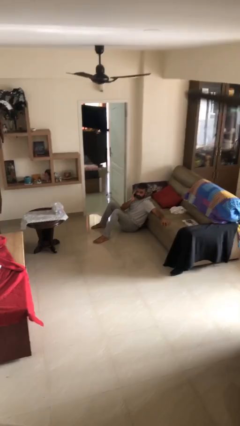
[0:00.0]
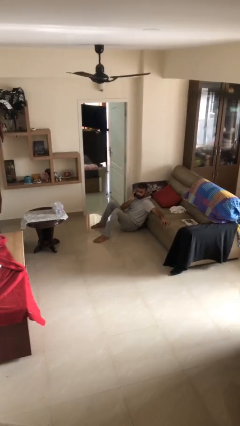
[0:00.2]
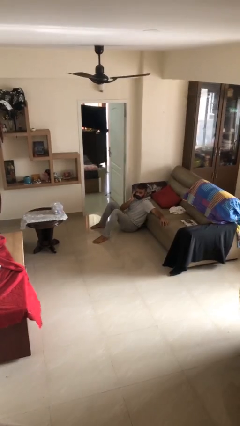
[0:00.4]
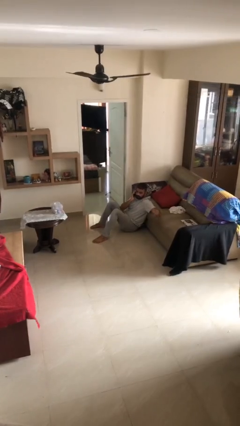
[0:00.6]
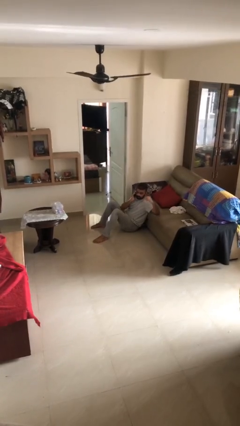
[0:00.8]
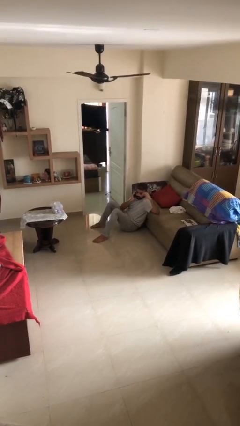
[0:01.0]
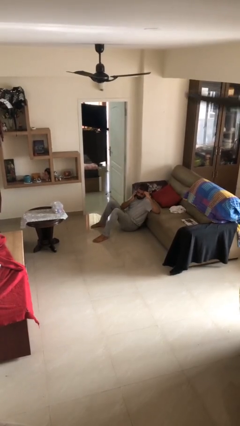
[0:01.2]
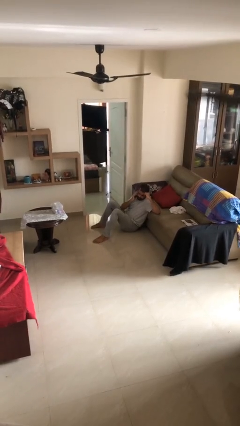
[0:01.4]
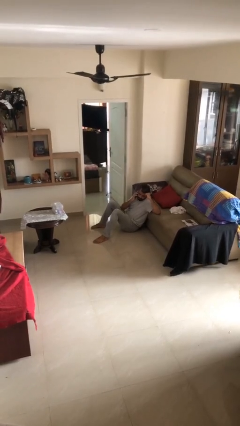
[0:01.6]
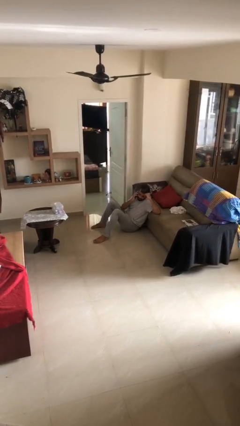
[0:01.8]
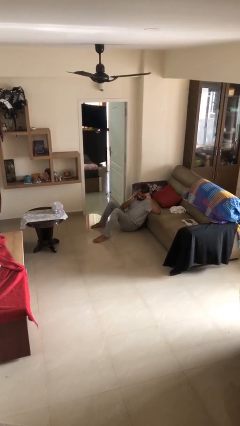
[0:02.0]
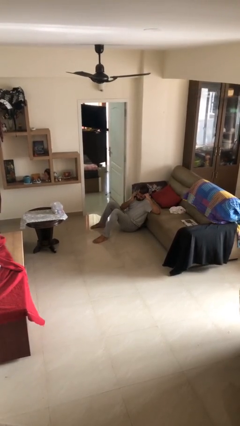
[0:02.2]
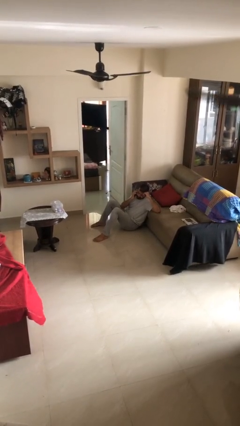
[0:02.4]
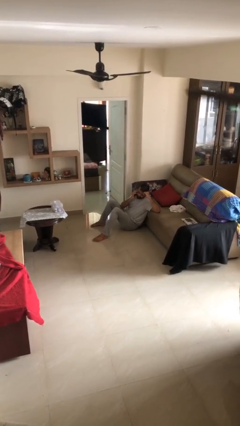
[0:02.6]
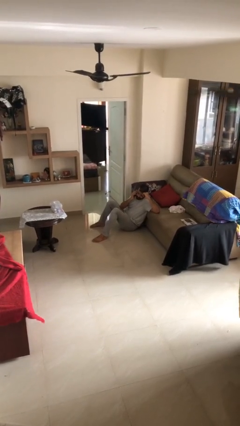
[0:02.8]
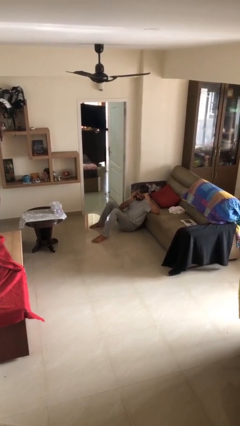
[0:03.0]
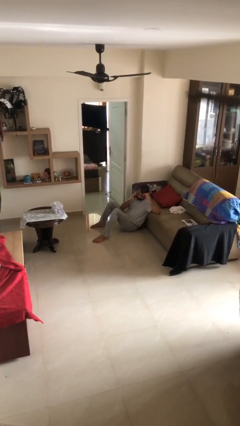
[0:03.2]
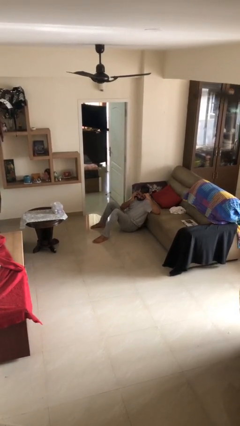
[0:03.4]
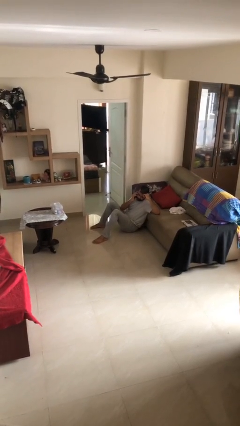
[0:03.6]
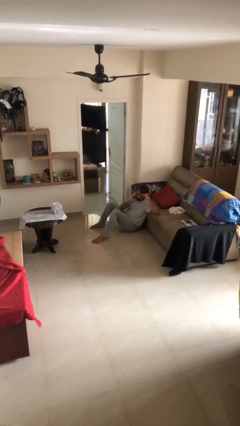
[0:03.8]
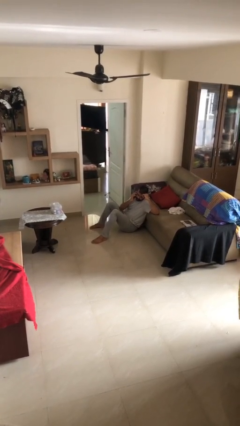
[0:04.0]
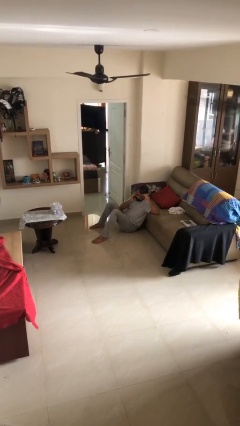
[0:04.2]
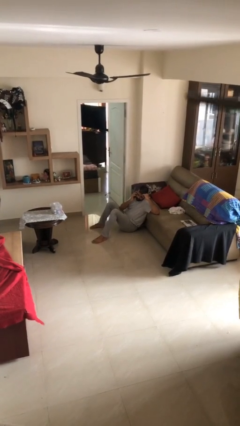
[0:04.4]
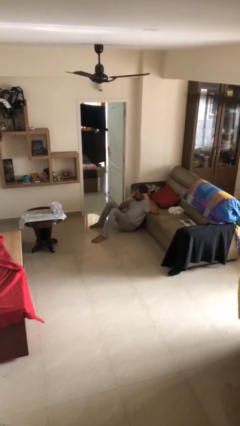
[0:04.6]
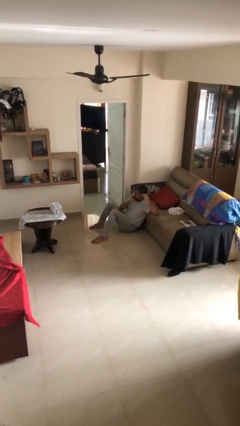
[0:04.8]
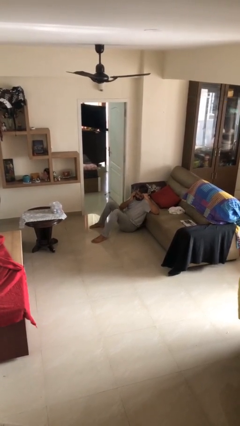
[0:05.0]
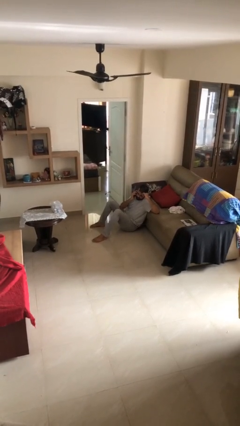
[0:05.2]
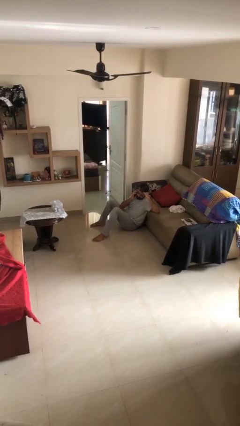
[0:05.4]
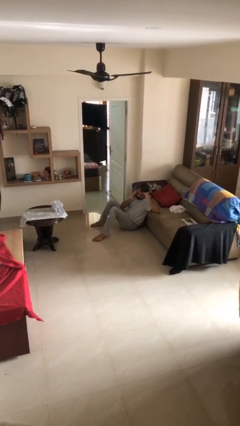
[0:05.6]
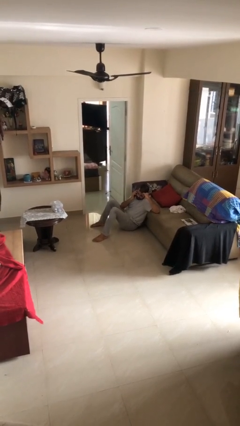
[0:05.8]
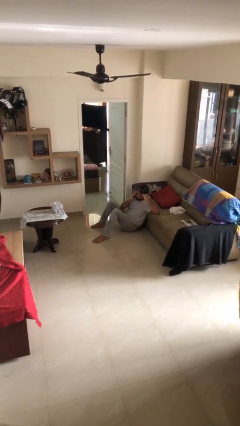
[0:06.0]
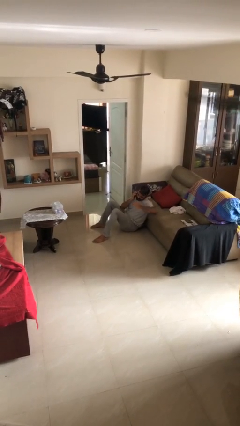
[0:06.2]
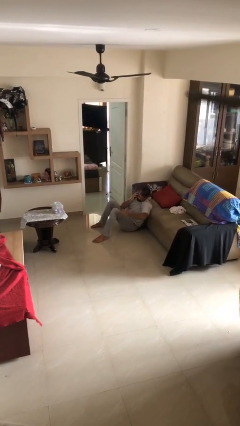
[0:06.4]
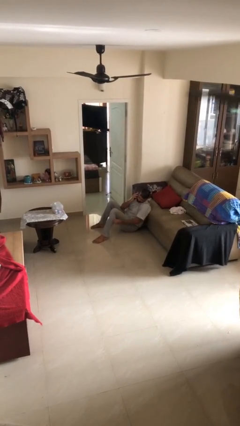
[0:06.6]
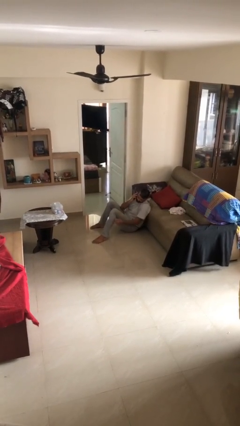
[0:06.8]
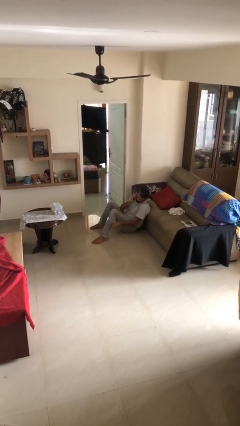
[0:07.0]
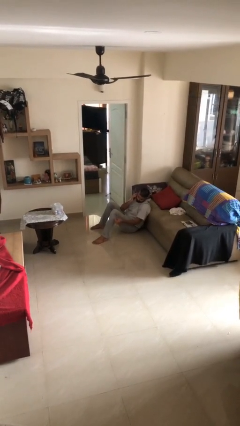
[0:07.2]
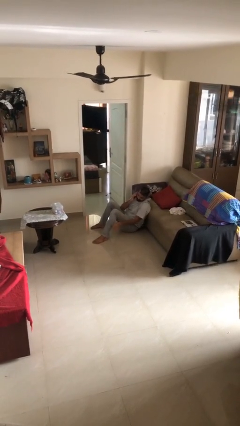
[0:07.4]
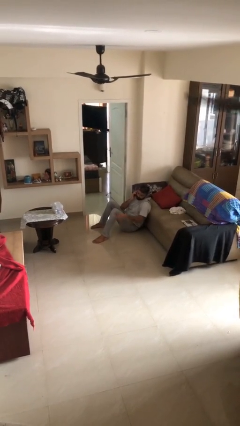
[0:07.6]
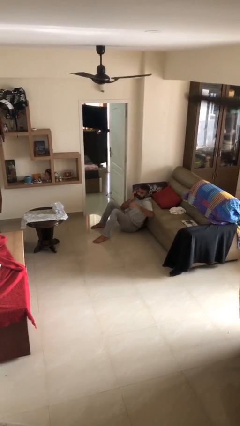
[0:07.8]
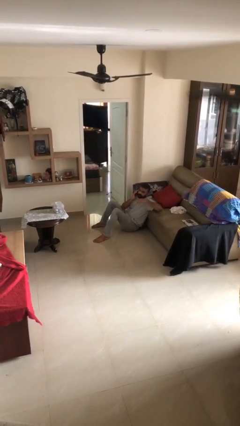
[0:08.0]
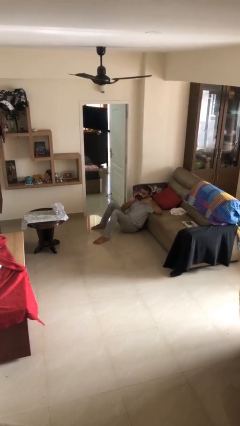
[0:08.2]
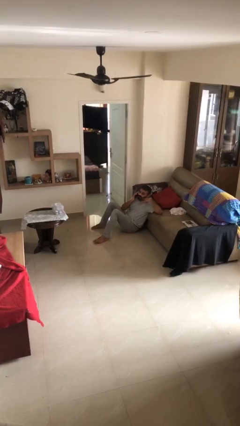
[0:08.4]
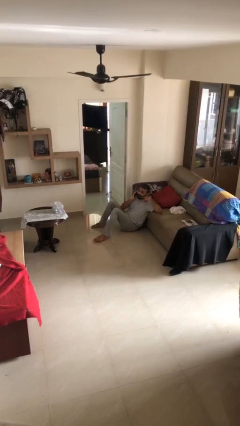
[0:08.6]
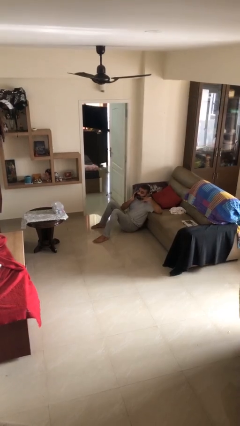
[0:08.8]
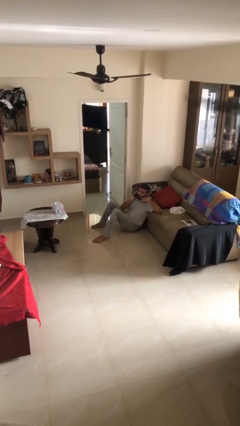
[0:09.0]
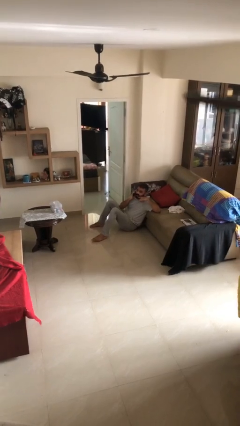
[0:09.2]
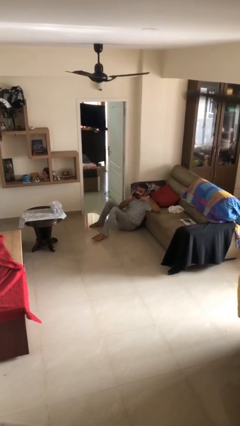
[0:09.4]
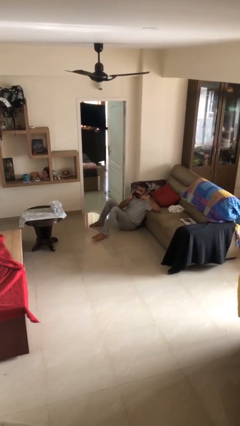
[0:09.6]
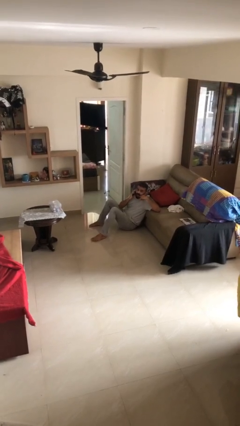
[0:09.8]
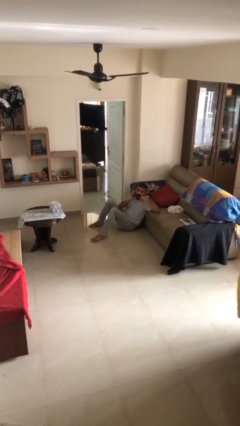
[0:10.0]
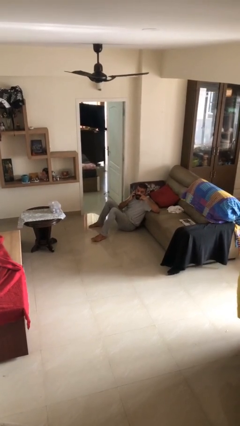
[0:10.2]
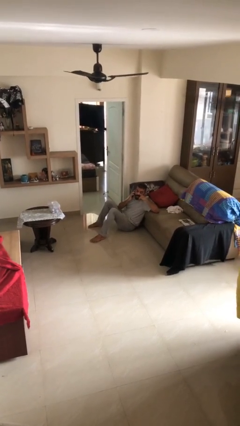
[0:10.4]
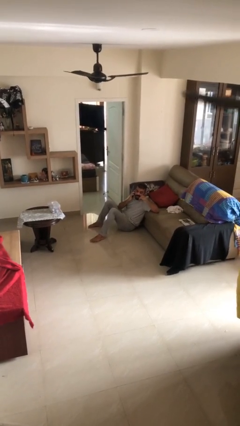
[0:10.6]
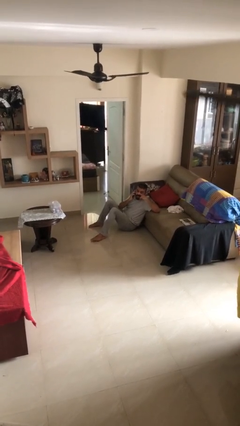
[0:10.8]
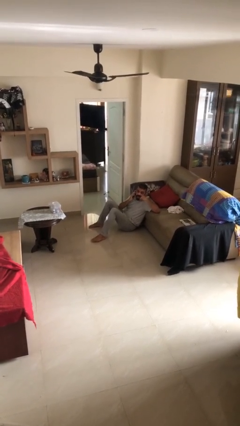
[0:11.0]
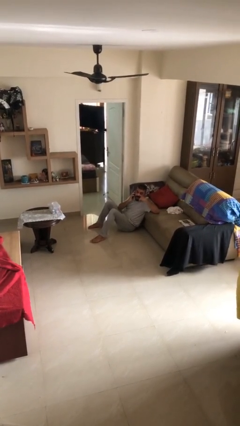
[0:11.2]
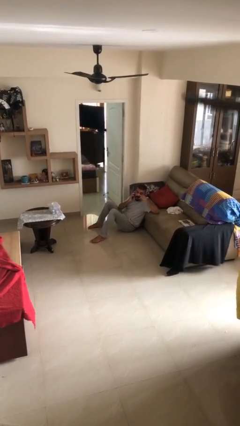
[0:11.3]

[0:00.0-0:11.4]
person talks on phone

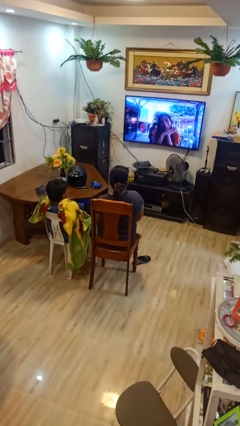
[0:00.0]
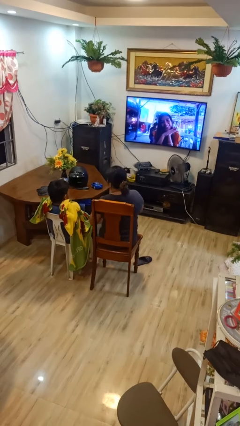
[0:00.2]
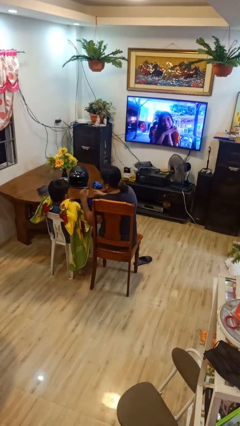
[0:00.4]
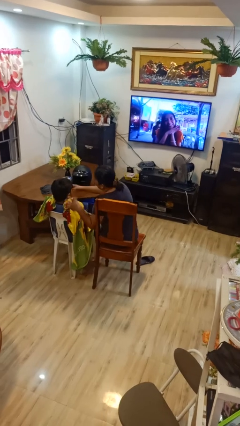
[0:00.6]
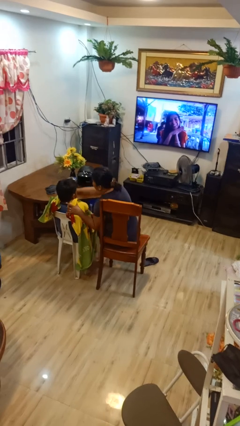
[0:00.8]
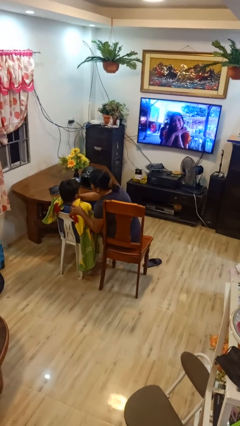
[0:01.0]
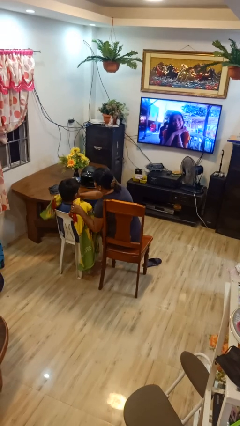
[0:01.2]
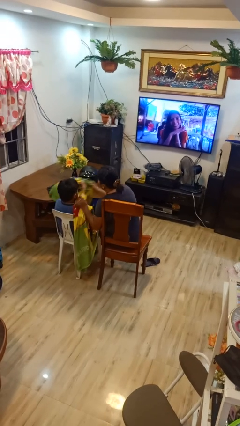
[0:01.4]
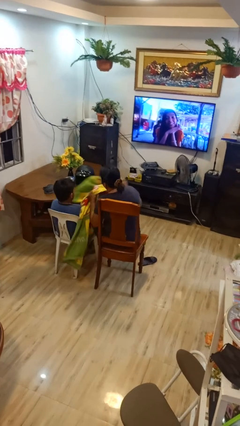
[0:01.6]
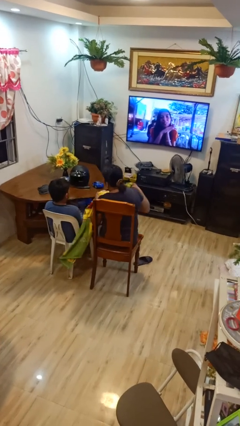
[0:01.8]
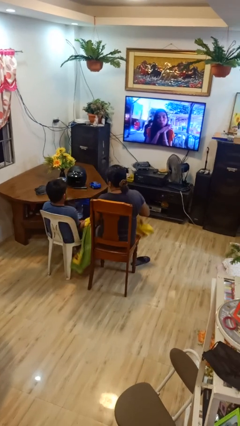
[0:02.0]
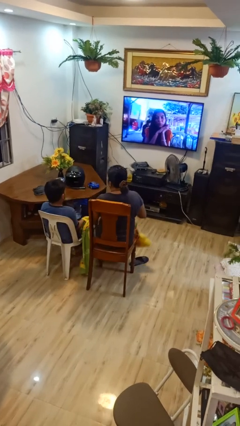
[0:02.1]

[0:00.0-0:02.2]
person uncovers friend with blanket

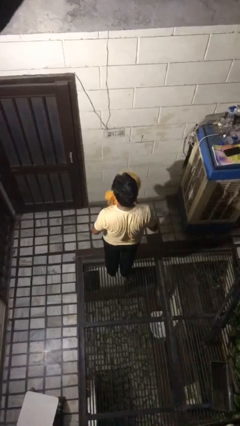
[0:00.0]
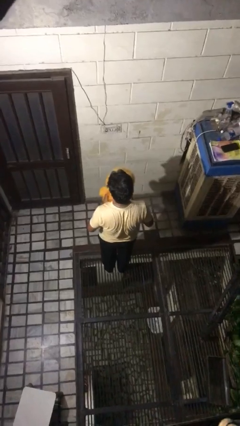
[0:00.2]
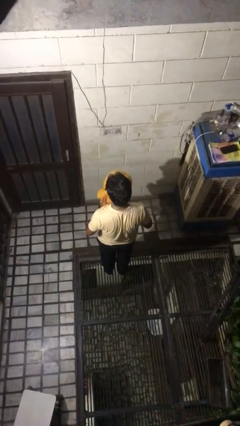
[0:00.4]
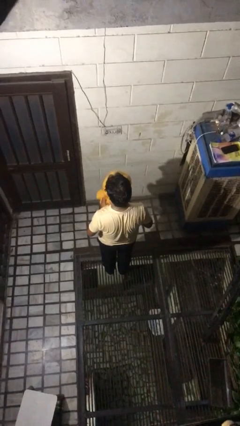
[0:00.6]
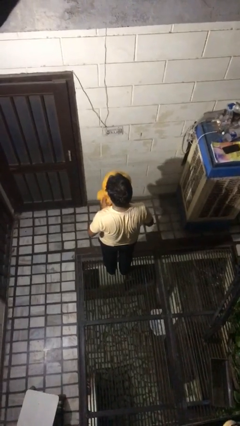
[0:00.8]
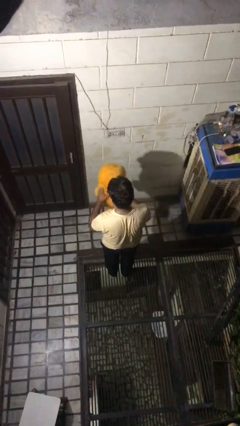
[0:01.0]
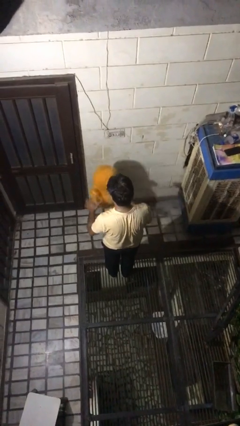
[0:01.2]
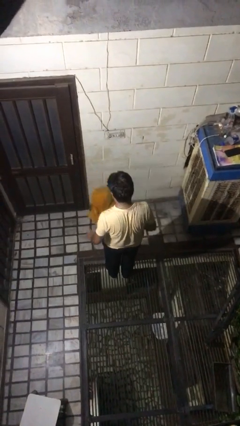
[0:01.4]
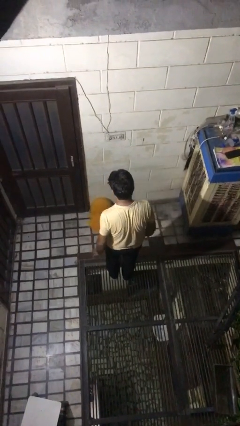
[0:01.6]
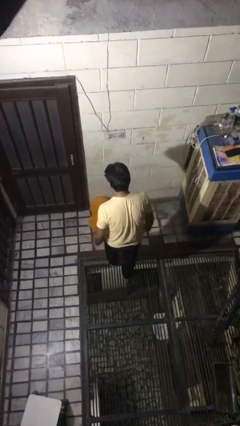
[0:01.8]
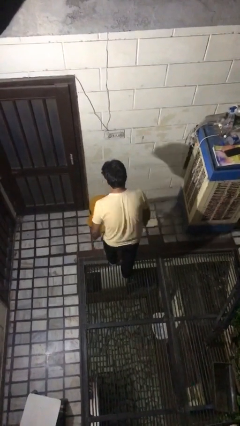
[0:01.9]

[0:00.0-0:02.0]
person throws object into air

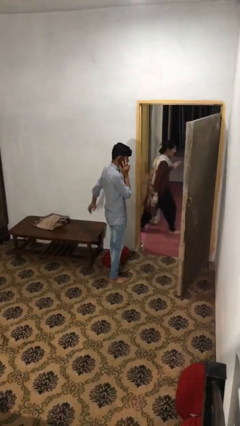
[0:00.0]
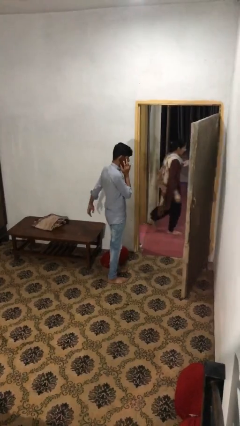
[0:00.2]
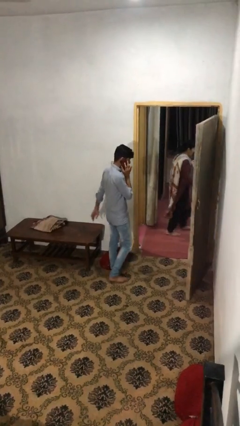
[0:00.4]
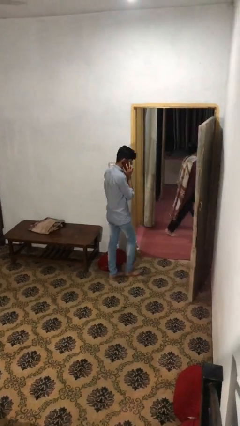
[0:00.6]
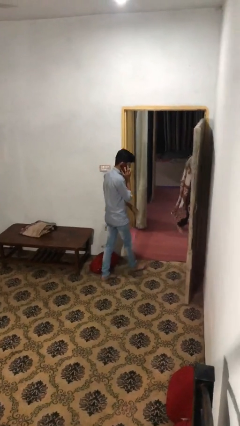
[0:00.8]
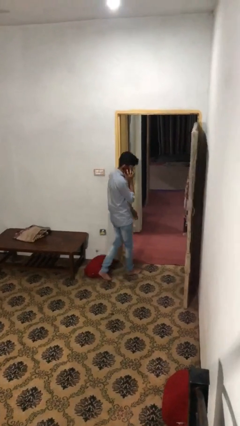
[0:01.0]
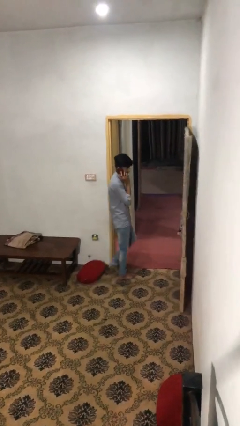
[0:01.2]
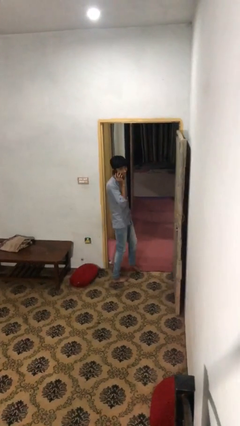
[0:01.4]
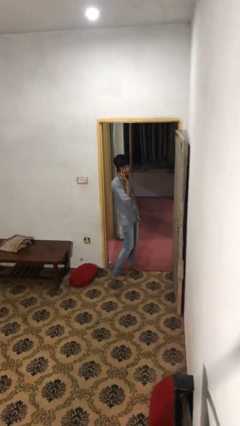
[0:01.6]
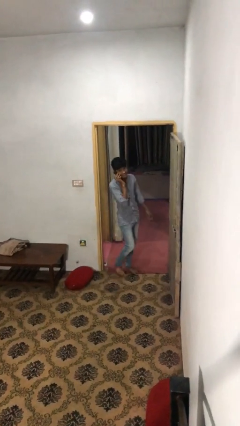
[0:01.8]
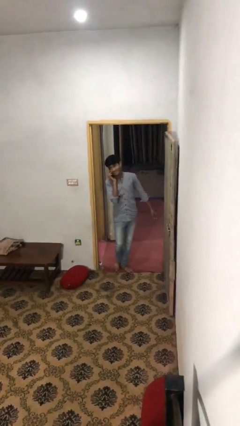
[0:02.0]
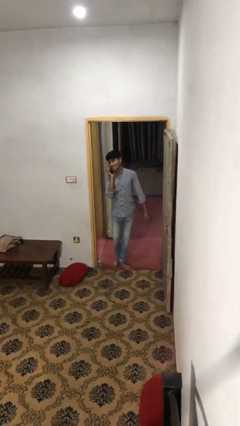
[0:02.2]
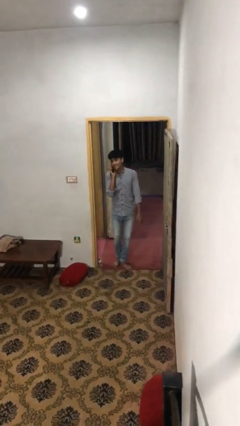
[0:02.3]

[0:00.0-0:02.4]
person exits scene through structure
